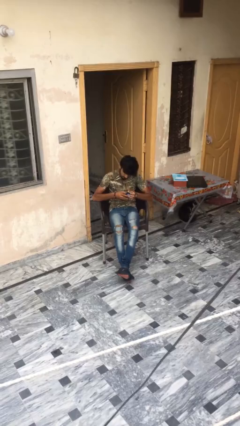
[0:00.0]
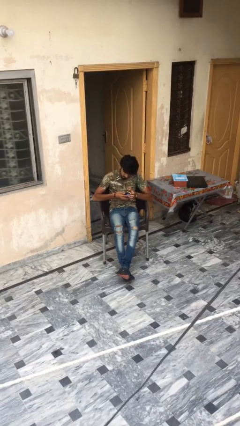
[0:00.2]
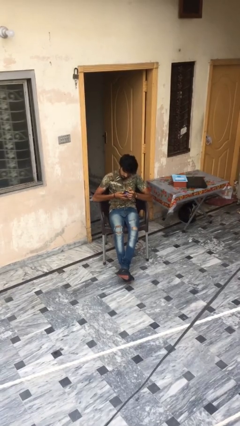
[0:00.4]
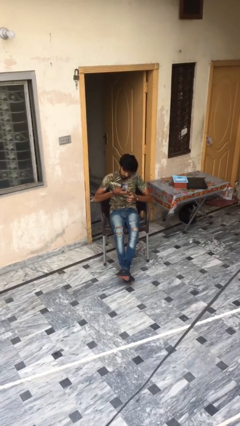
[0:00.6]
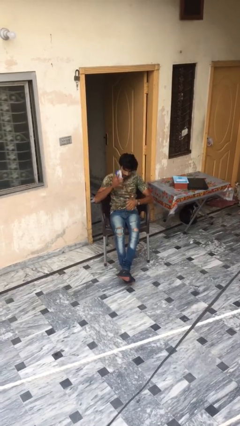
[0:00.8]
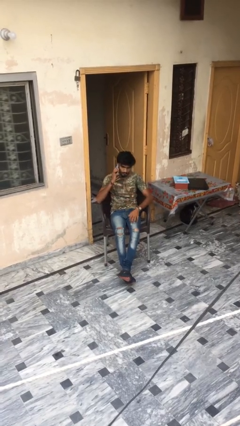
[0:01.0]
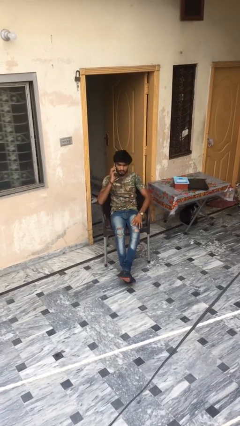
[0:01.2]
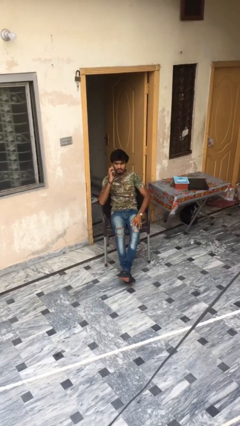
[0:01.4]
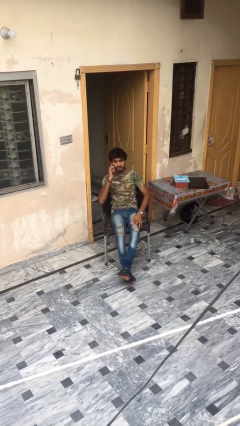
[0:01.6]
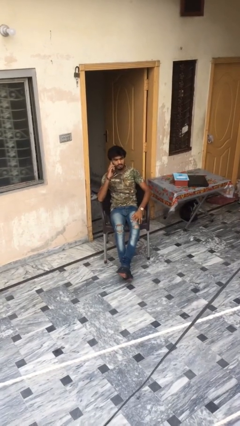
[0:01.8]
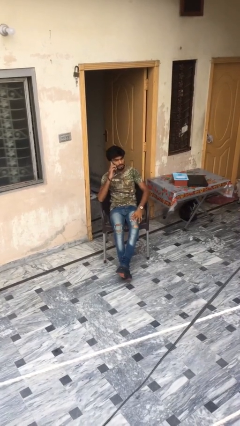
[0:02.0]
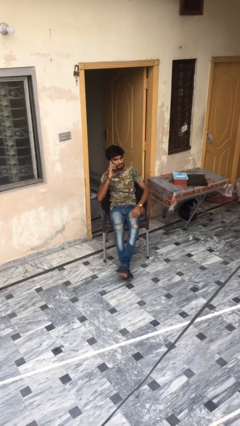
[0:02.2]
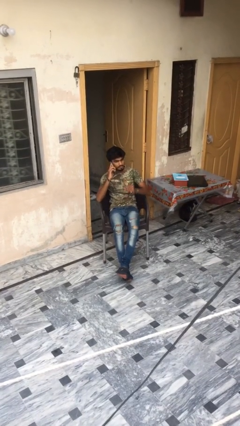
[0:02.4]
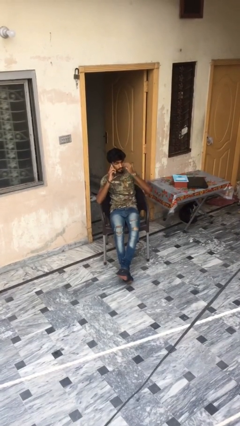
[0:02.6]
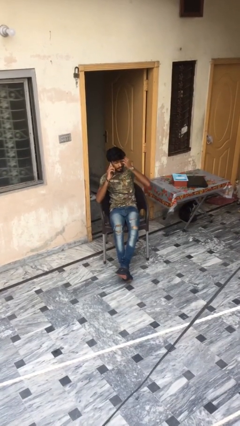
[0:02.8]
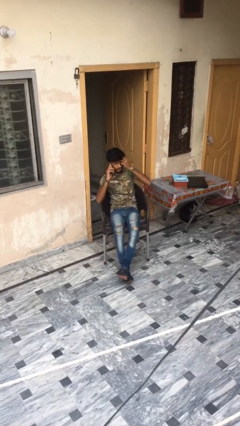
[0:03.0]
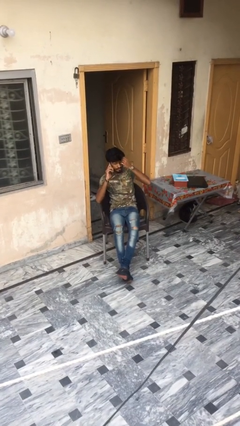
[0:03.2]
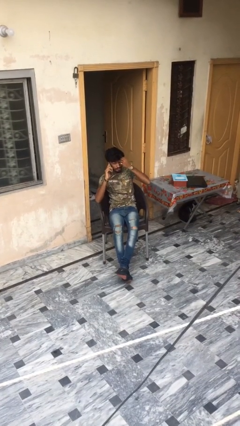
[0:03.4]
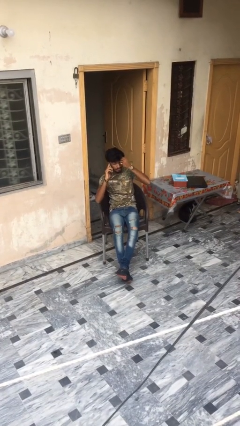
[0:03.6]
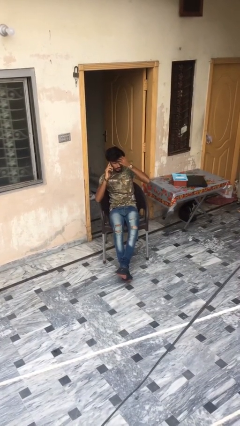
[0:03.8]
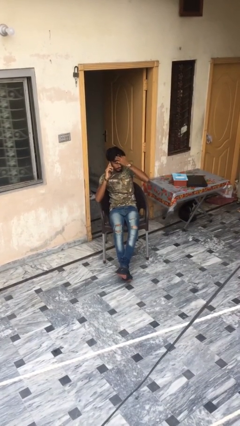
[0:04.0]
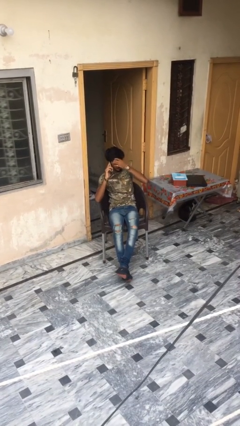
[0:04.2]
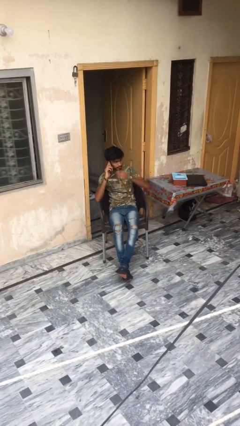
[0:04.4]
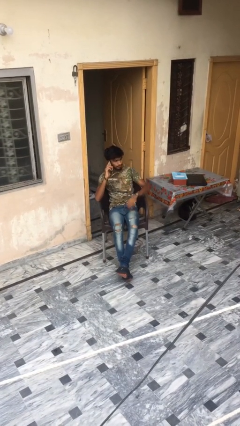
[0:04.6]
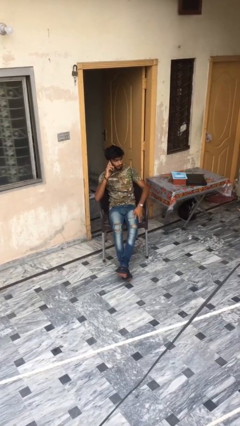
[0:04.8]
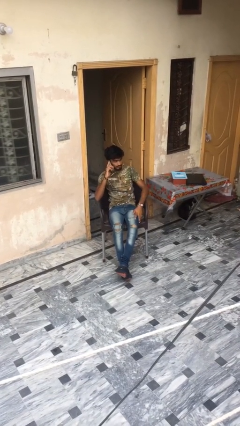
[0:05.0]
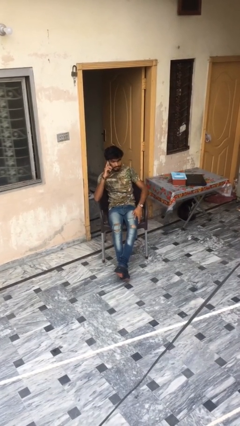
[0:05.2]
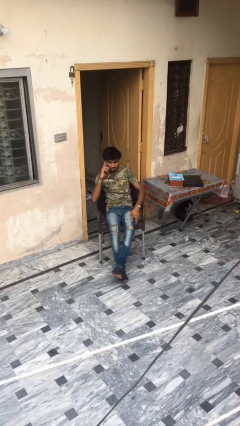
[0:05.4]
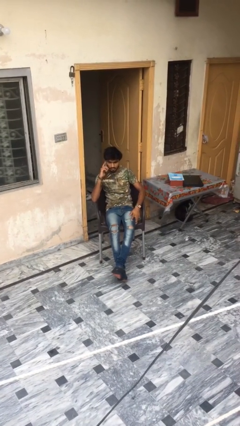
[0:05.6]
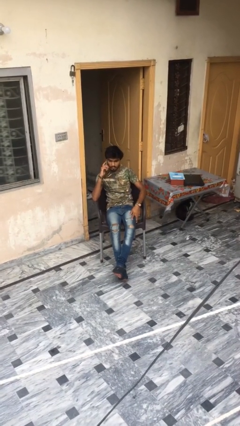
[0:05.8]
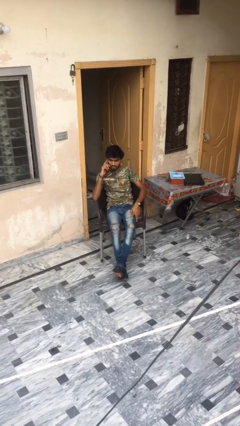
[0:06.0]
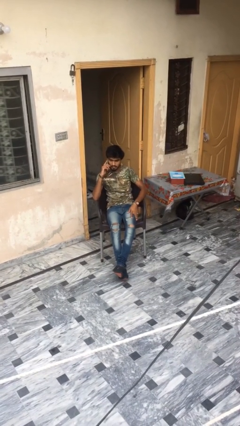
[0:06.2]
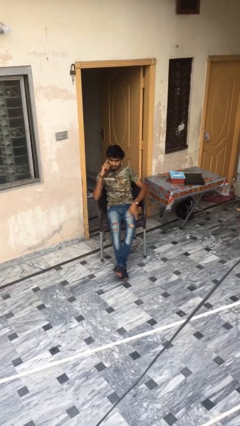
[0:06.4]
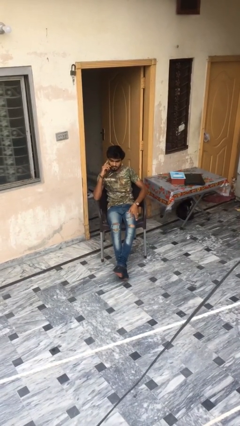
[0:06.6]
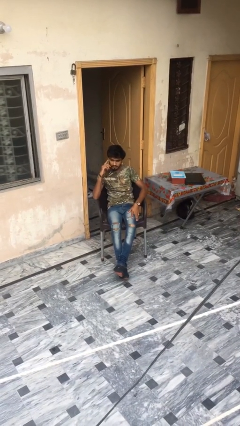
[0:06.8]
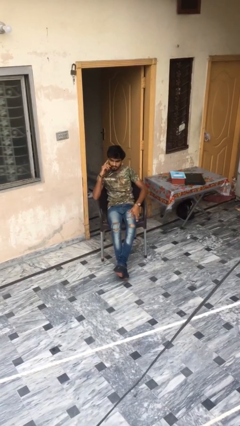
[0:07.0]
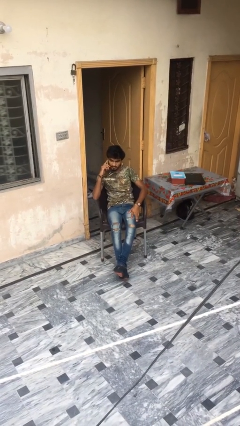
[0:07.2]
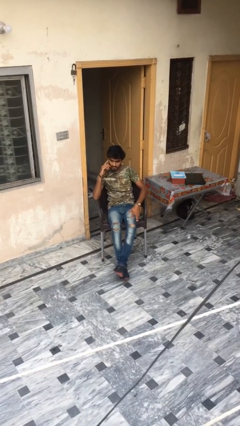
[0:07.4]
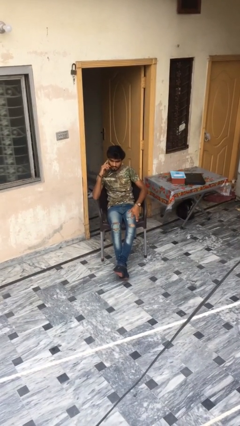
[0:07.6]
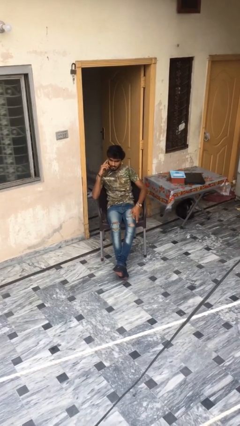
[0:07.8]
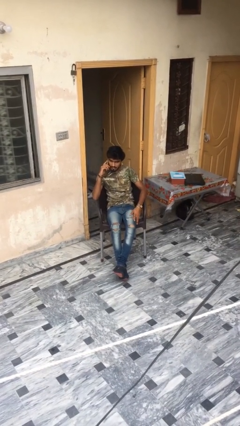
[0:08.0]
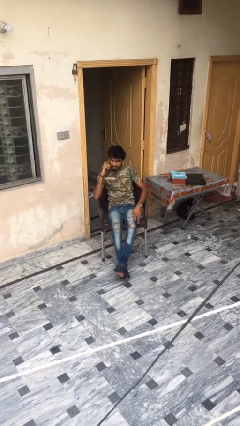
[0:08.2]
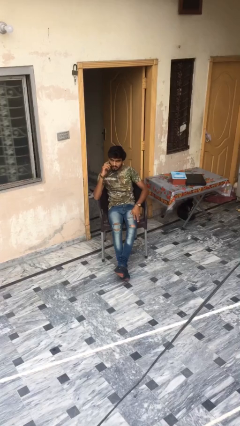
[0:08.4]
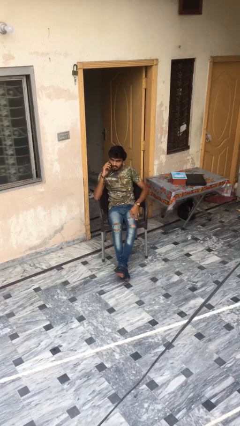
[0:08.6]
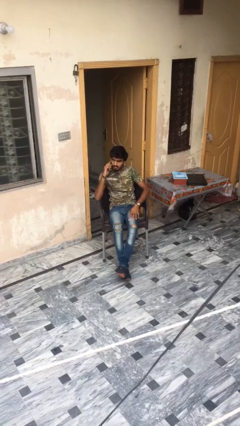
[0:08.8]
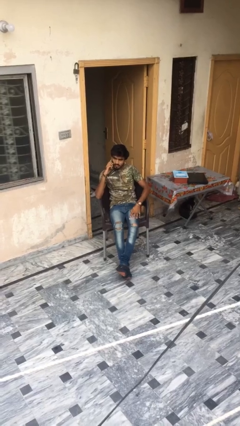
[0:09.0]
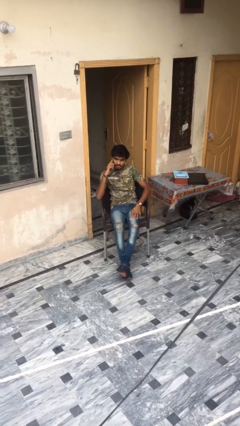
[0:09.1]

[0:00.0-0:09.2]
person talks on phone

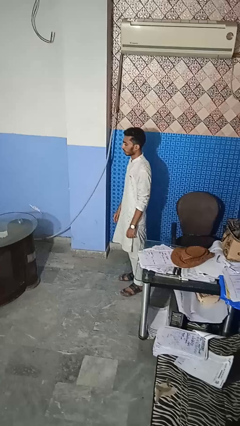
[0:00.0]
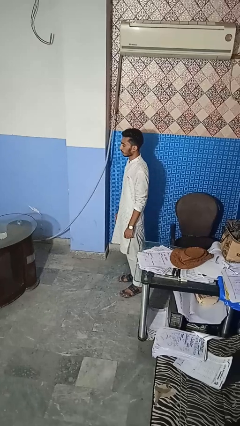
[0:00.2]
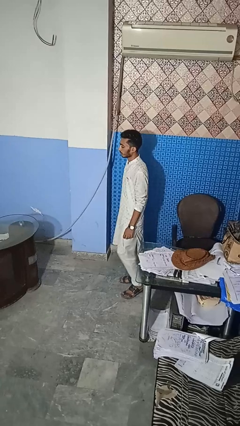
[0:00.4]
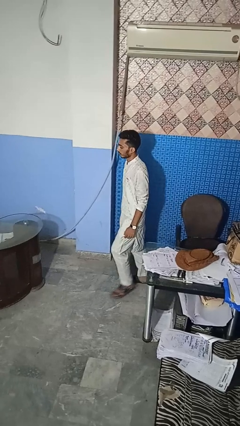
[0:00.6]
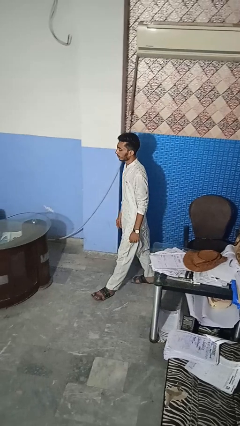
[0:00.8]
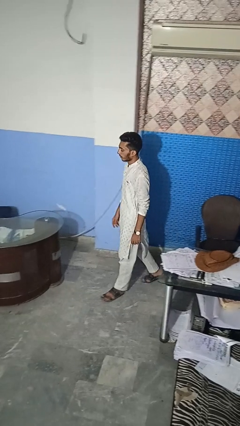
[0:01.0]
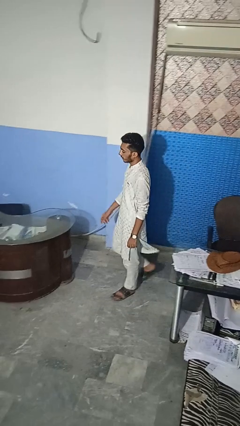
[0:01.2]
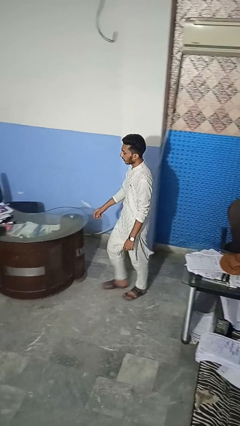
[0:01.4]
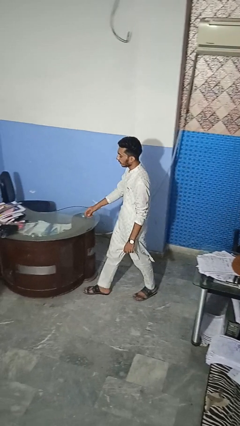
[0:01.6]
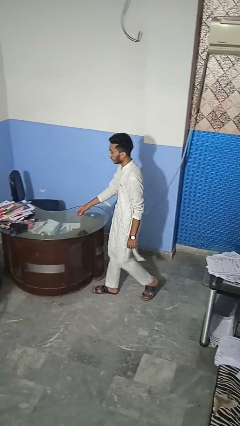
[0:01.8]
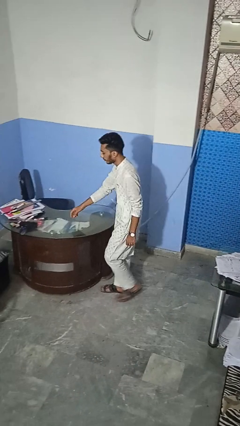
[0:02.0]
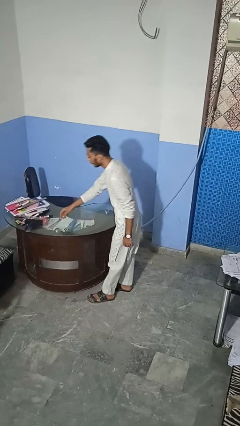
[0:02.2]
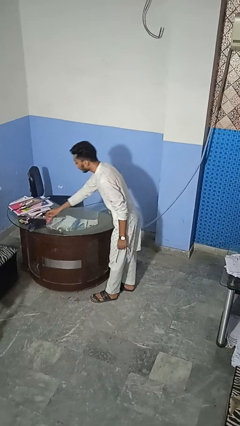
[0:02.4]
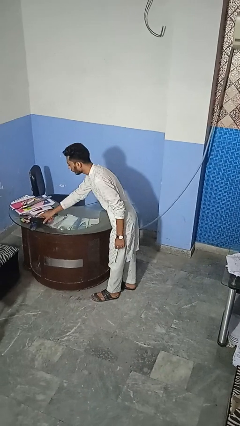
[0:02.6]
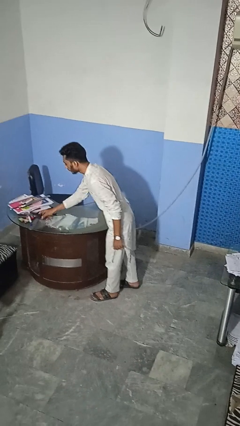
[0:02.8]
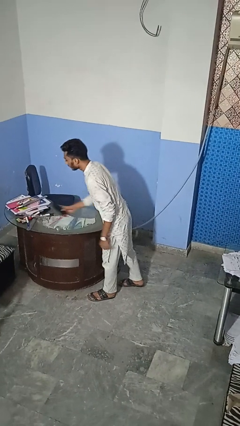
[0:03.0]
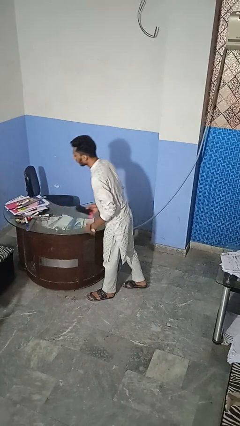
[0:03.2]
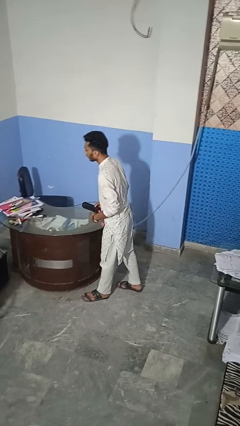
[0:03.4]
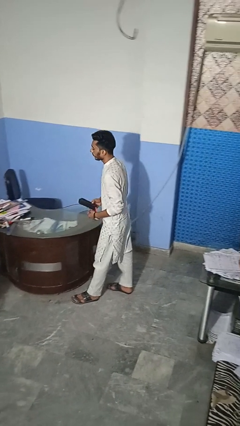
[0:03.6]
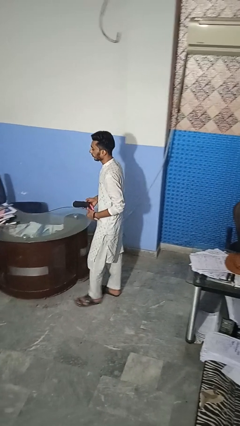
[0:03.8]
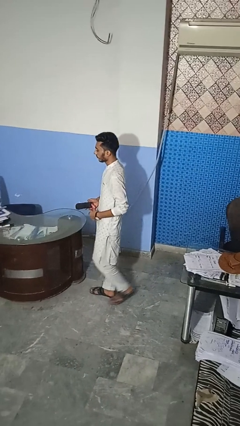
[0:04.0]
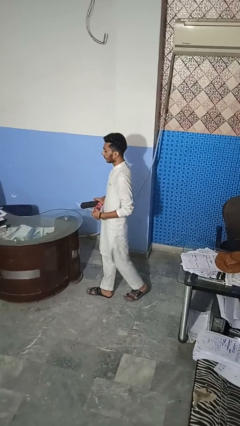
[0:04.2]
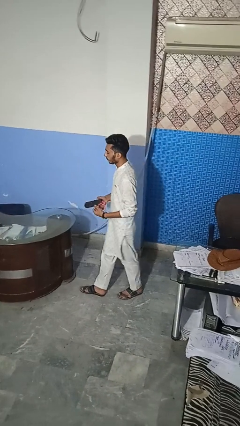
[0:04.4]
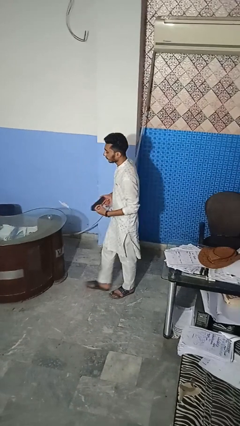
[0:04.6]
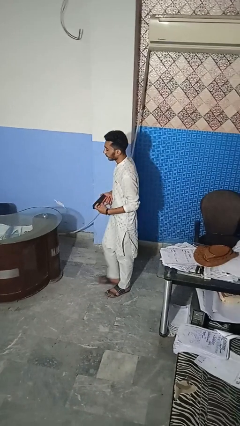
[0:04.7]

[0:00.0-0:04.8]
person picks up object from table

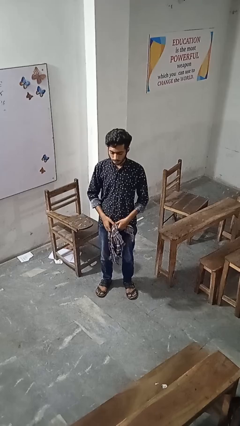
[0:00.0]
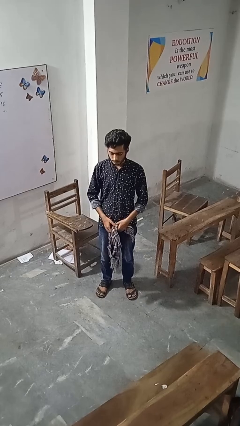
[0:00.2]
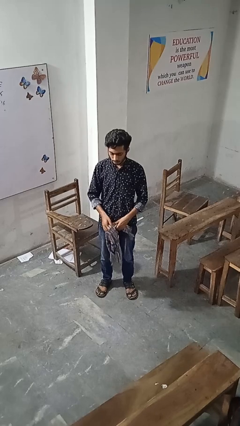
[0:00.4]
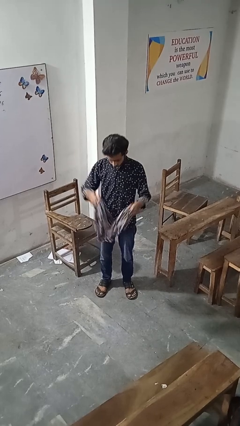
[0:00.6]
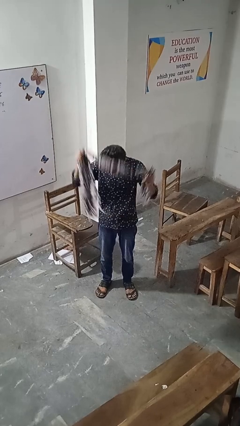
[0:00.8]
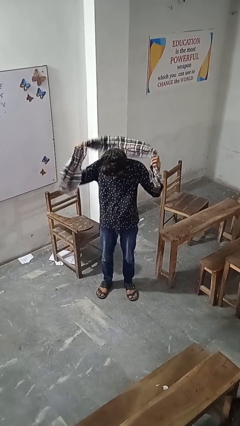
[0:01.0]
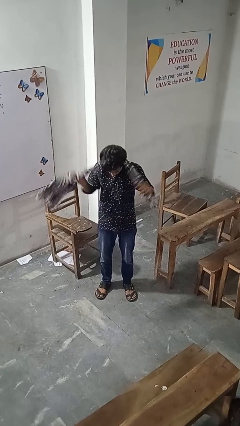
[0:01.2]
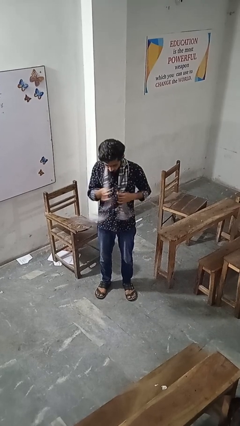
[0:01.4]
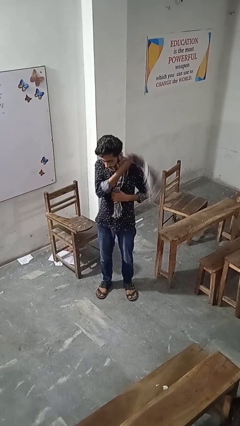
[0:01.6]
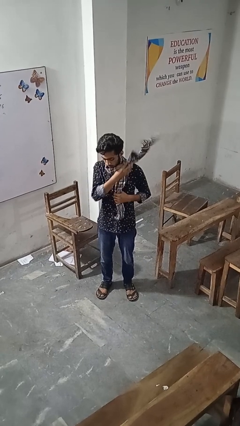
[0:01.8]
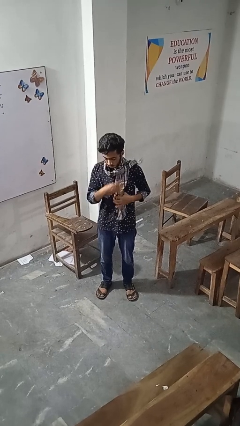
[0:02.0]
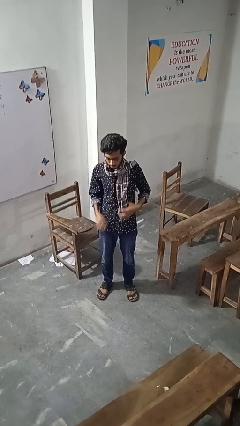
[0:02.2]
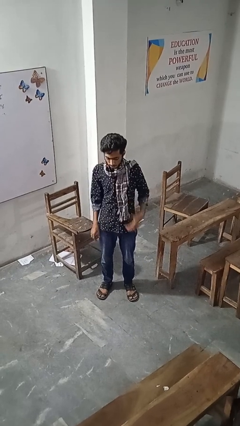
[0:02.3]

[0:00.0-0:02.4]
person puts on scarf

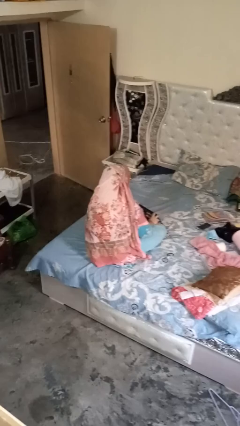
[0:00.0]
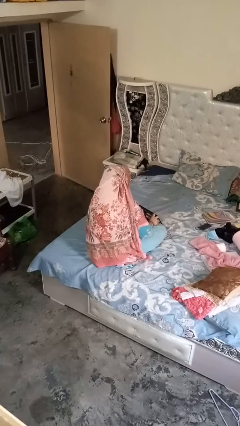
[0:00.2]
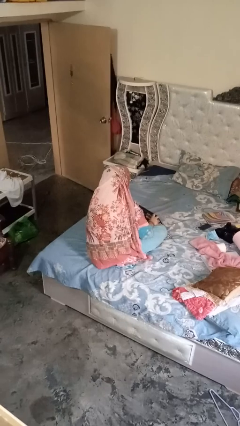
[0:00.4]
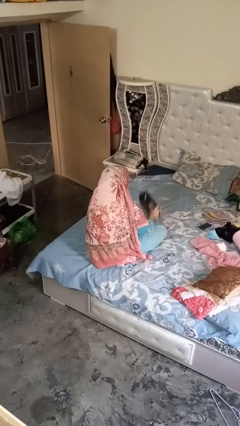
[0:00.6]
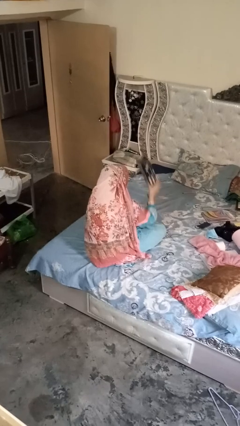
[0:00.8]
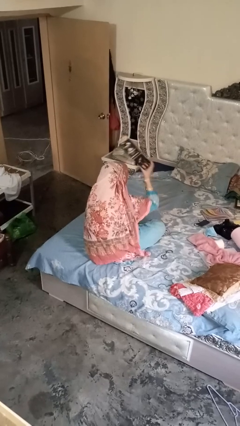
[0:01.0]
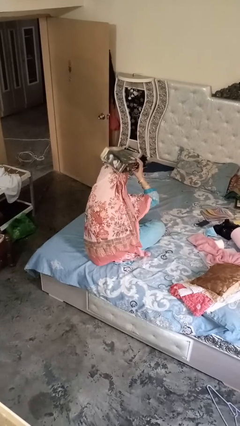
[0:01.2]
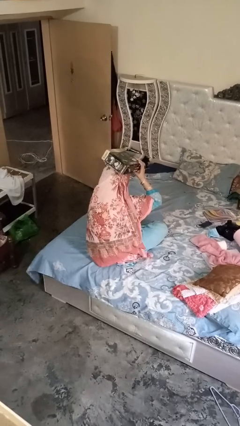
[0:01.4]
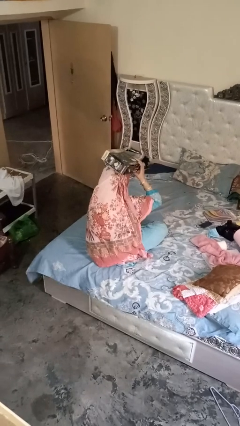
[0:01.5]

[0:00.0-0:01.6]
person holds object above head
